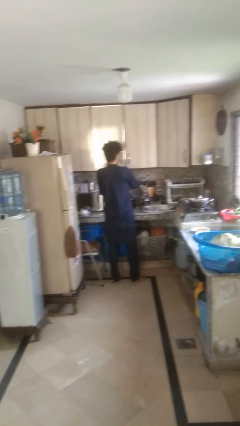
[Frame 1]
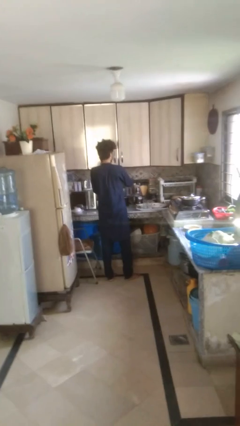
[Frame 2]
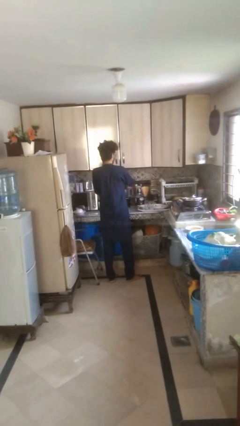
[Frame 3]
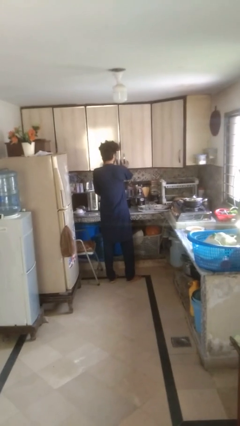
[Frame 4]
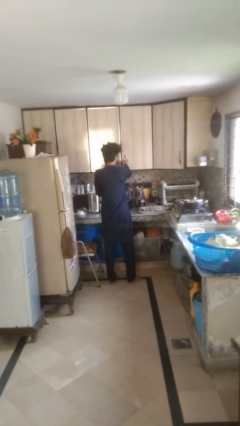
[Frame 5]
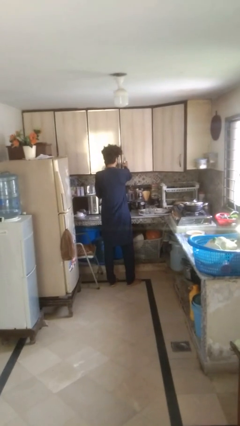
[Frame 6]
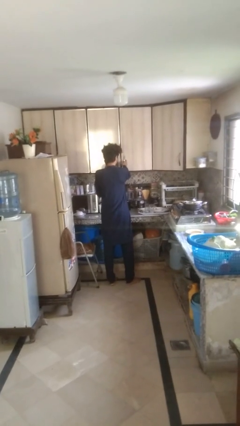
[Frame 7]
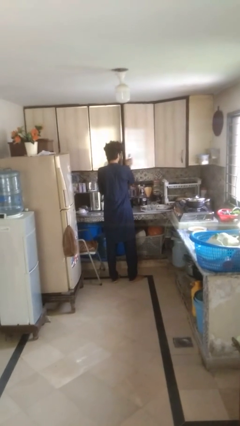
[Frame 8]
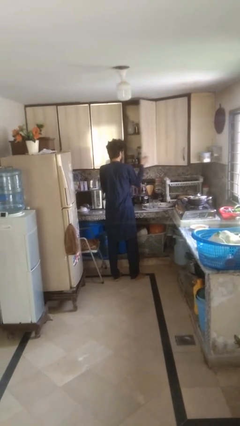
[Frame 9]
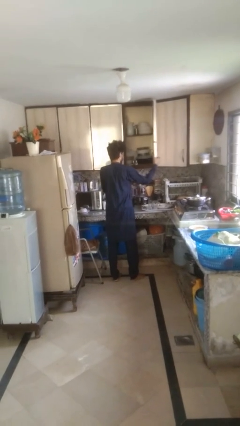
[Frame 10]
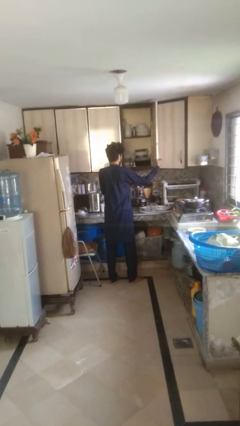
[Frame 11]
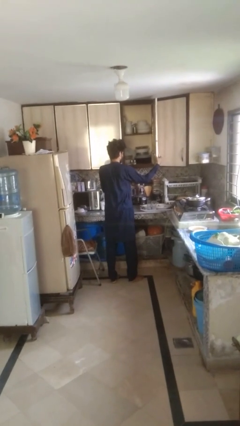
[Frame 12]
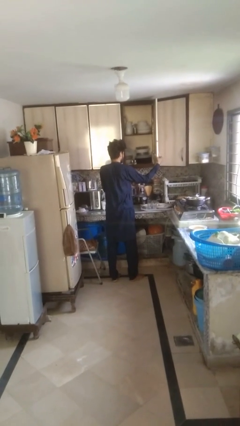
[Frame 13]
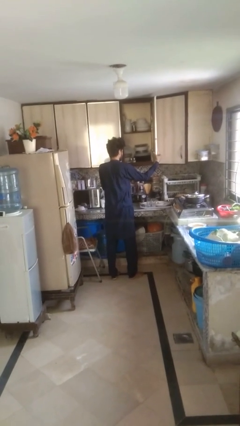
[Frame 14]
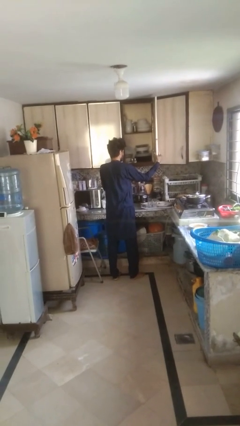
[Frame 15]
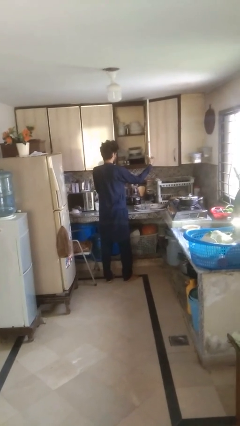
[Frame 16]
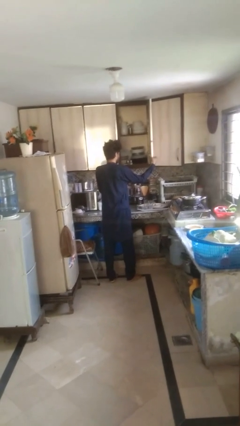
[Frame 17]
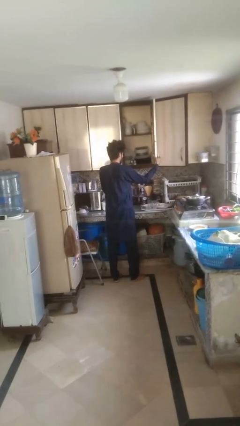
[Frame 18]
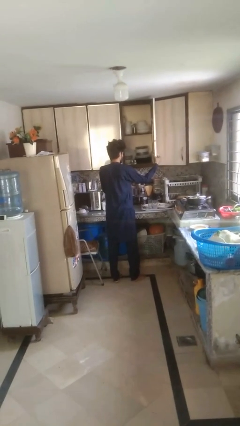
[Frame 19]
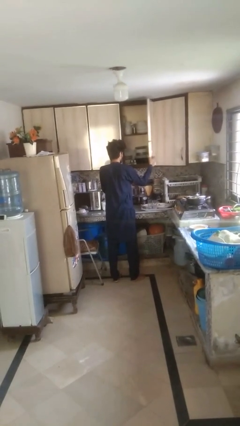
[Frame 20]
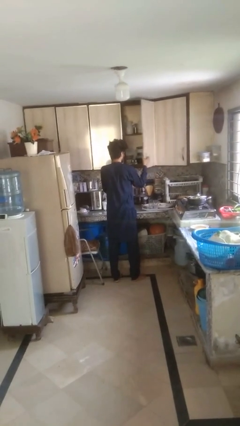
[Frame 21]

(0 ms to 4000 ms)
person opens cabinet

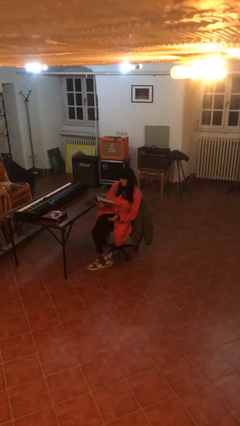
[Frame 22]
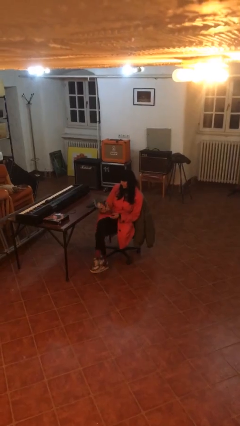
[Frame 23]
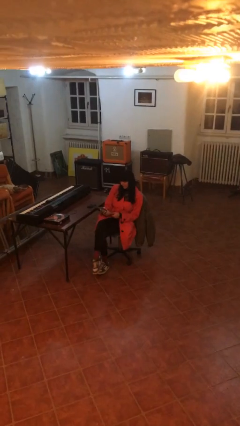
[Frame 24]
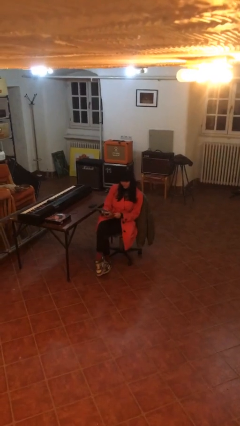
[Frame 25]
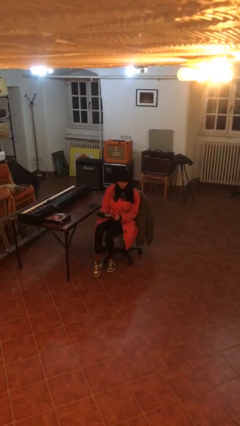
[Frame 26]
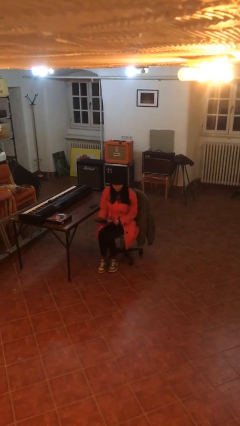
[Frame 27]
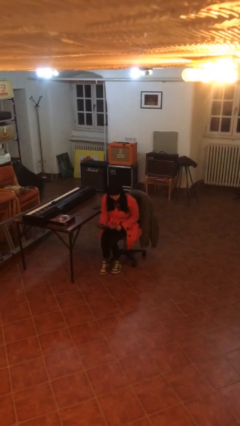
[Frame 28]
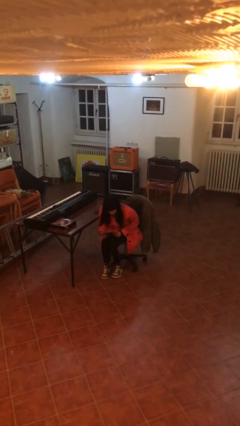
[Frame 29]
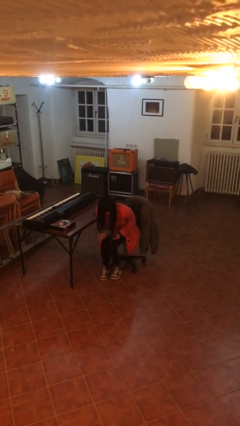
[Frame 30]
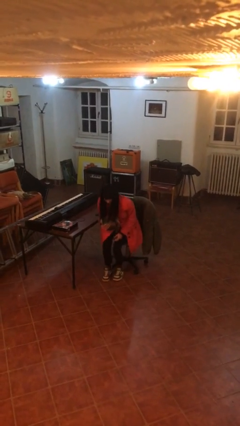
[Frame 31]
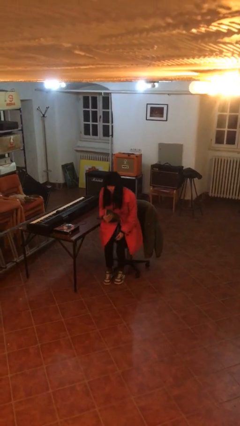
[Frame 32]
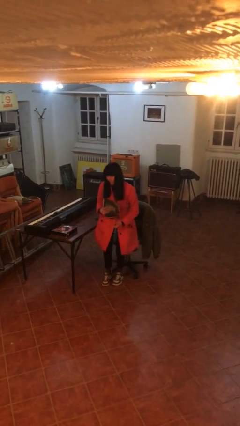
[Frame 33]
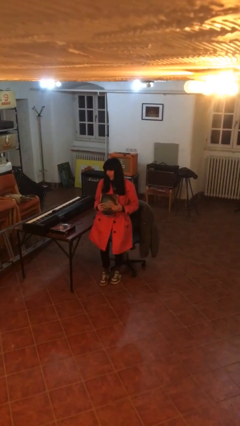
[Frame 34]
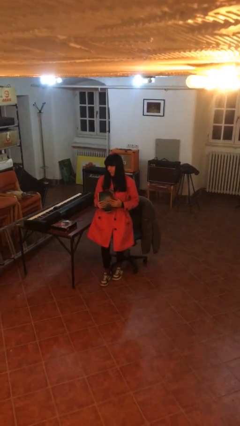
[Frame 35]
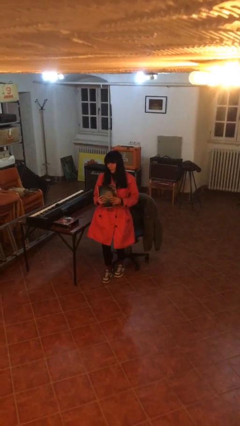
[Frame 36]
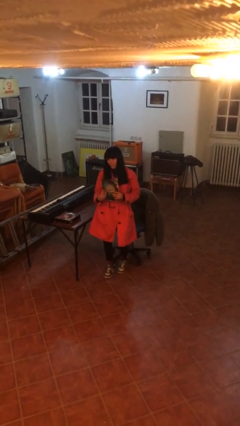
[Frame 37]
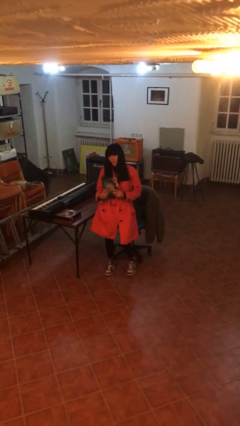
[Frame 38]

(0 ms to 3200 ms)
person stands up

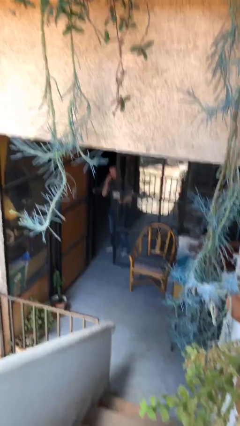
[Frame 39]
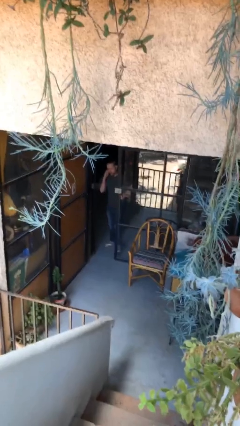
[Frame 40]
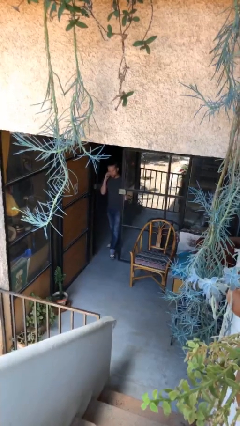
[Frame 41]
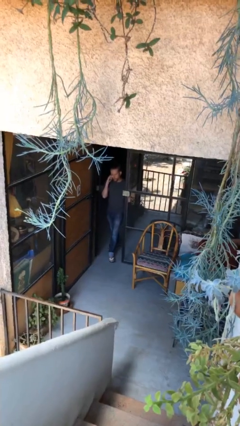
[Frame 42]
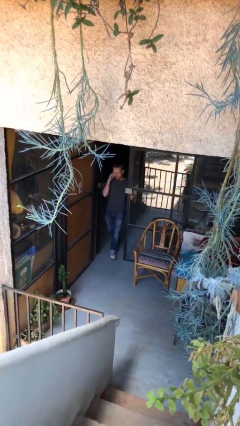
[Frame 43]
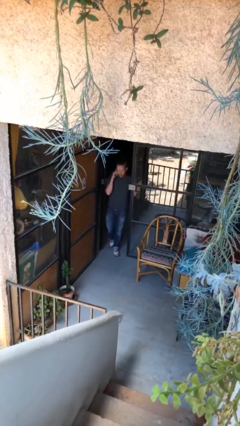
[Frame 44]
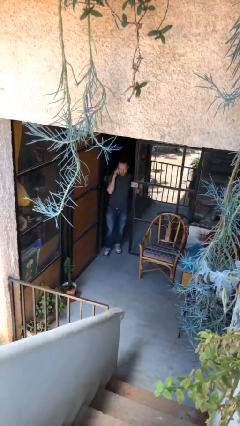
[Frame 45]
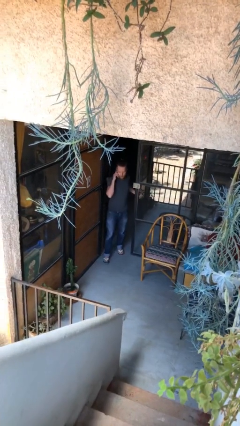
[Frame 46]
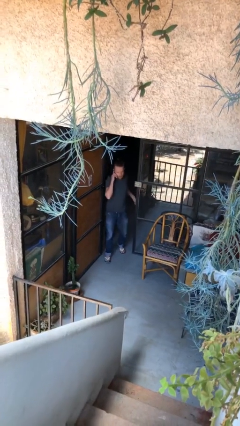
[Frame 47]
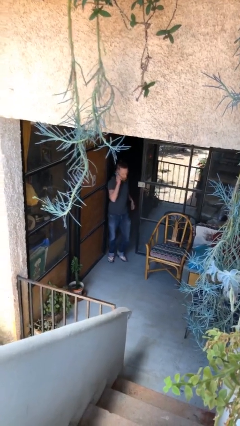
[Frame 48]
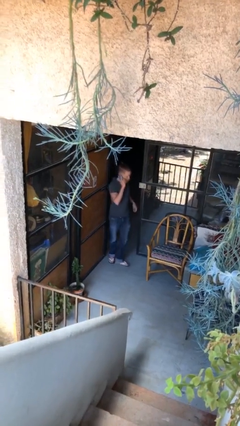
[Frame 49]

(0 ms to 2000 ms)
person enters scene through structure

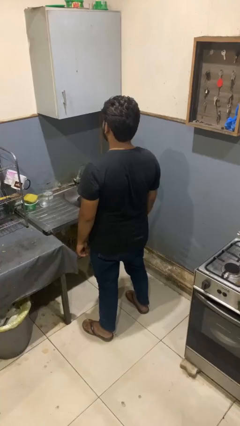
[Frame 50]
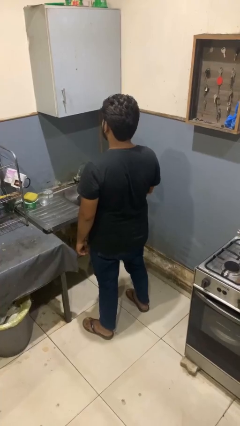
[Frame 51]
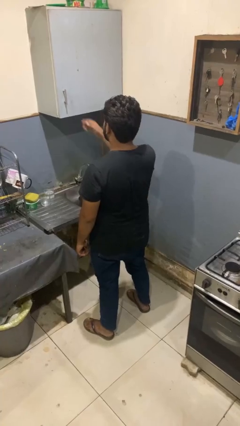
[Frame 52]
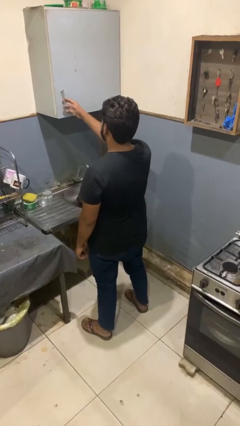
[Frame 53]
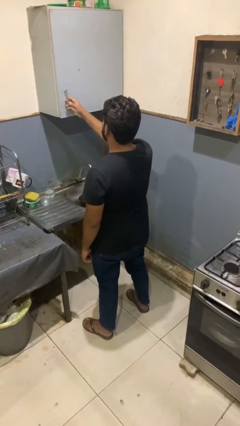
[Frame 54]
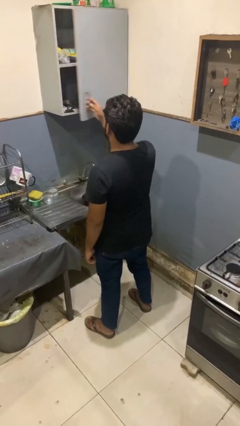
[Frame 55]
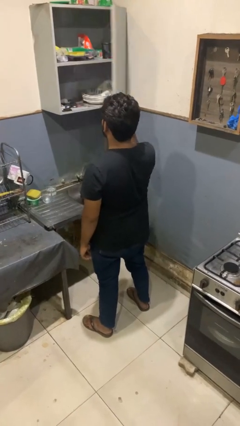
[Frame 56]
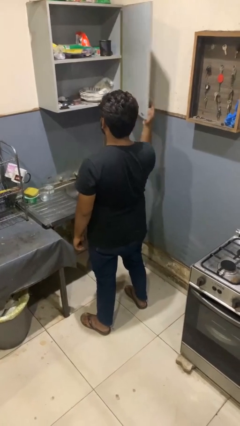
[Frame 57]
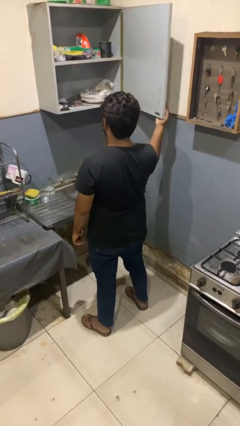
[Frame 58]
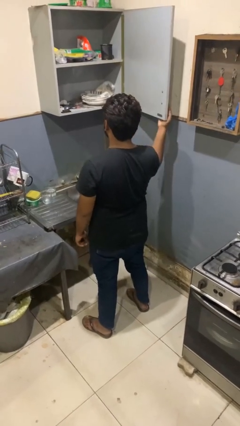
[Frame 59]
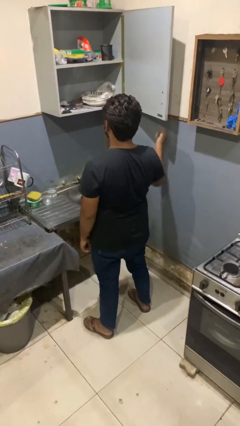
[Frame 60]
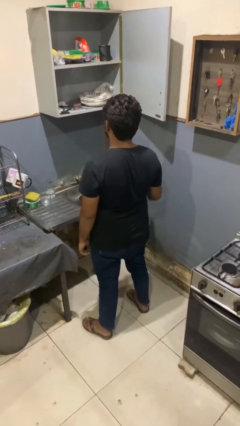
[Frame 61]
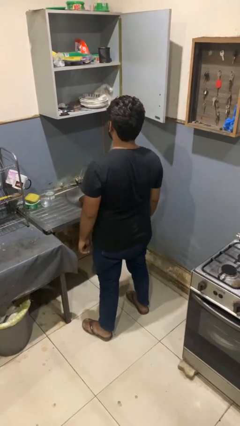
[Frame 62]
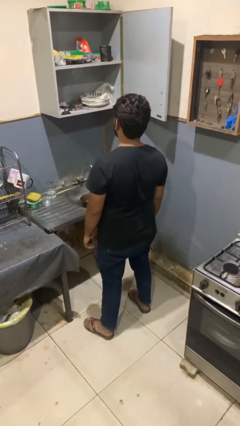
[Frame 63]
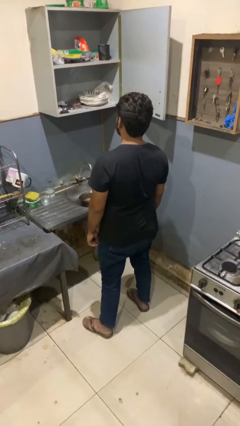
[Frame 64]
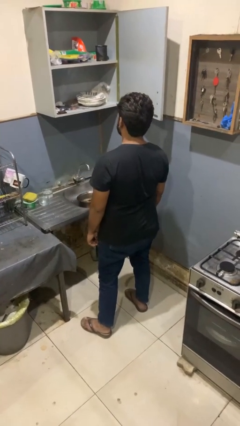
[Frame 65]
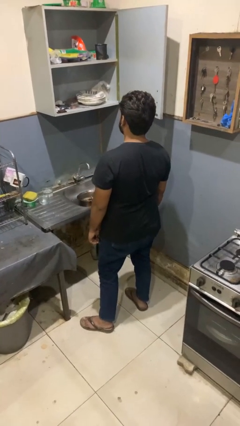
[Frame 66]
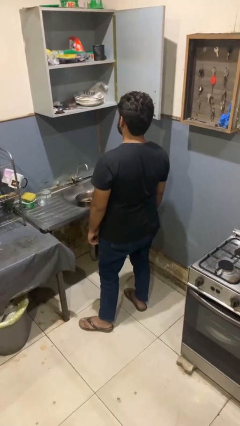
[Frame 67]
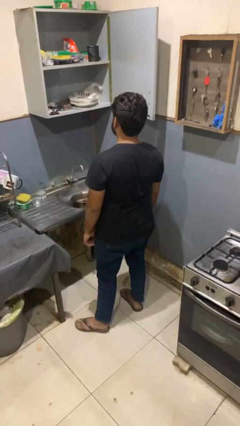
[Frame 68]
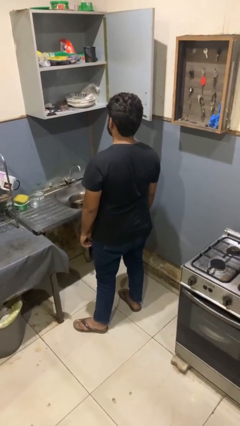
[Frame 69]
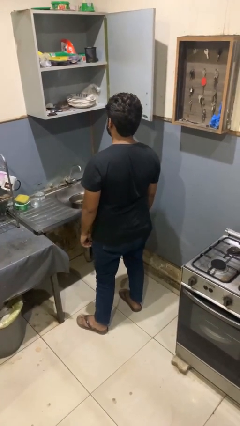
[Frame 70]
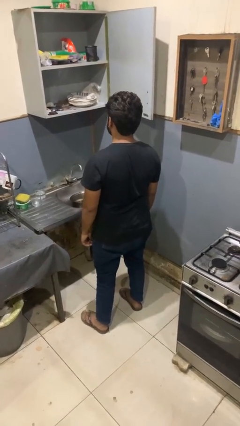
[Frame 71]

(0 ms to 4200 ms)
person opens kitchen drawer

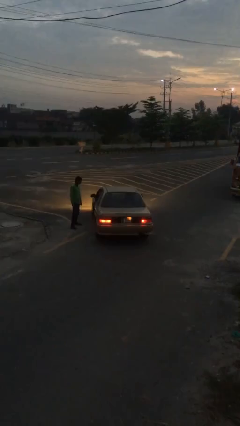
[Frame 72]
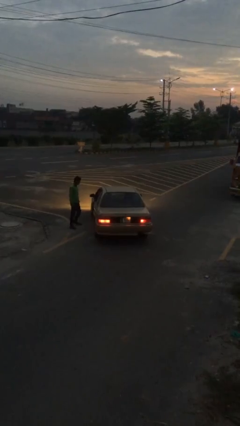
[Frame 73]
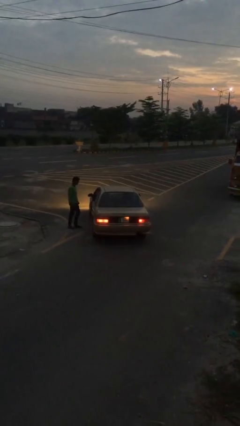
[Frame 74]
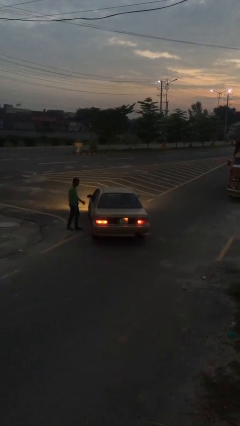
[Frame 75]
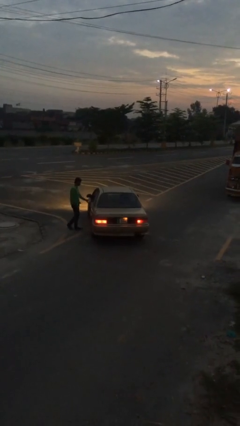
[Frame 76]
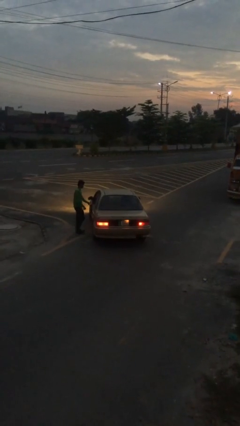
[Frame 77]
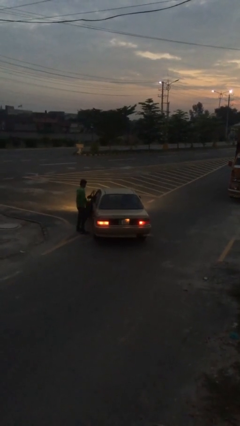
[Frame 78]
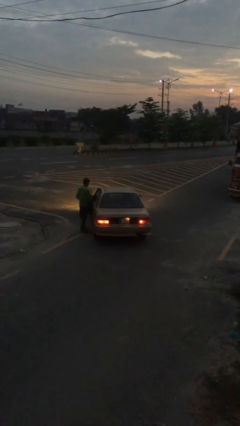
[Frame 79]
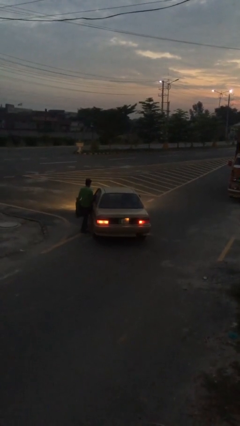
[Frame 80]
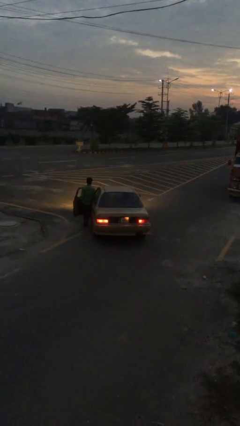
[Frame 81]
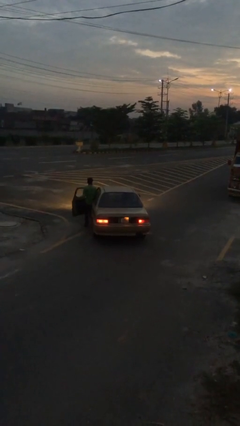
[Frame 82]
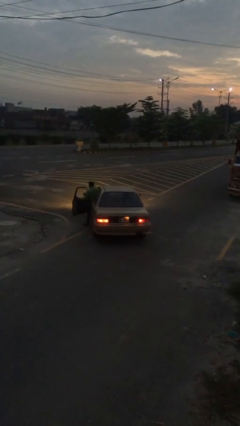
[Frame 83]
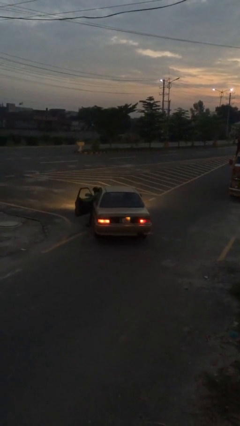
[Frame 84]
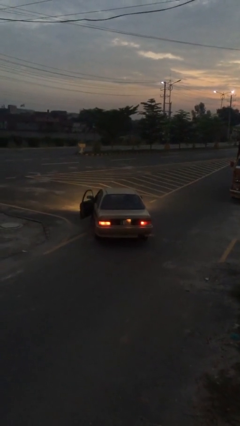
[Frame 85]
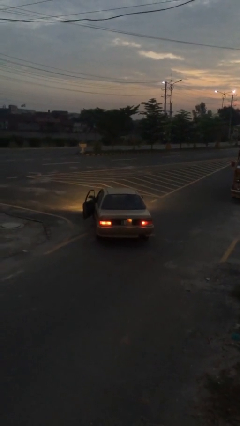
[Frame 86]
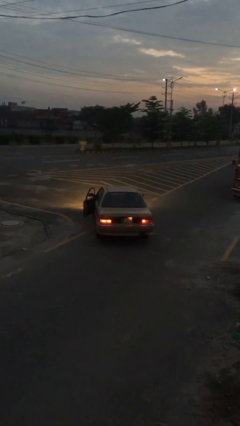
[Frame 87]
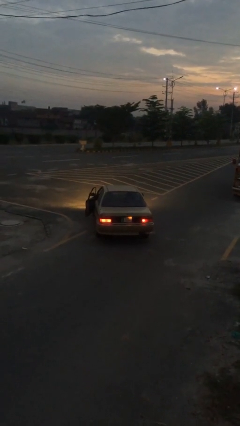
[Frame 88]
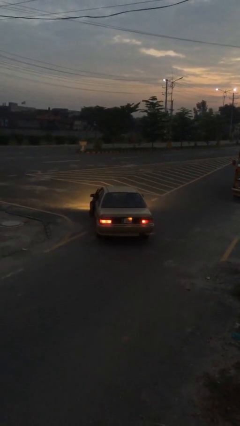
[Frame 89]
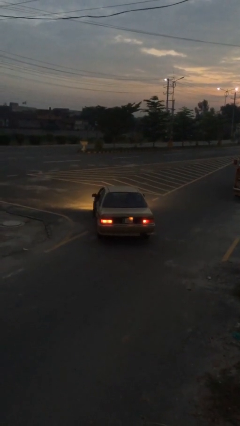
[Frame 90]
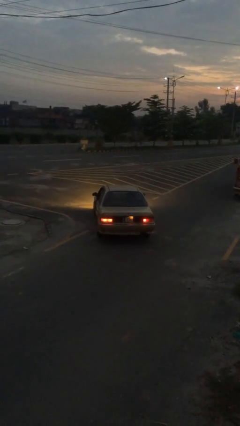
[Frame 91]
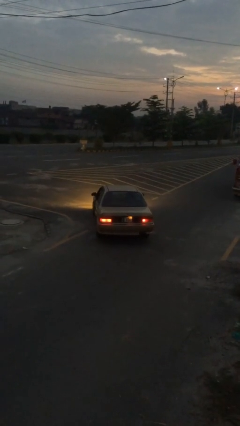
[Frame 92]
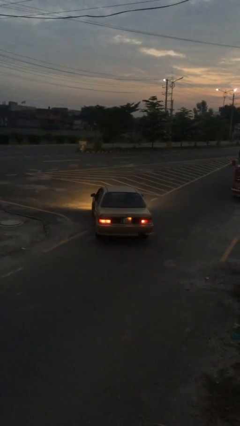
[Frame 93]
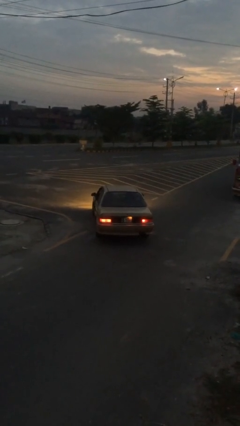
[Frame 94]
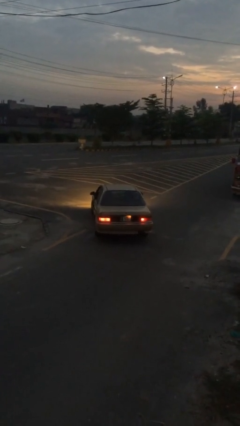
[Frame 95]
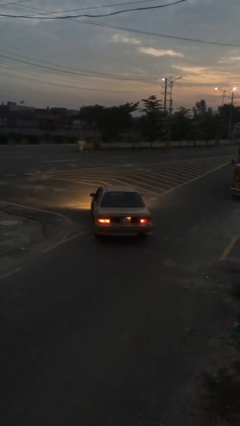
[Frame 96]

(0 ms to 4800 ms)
car picks up person
